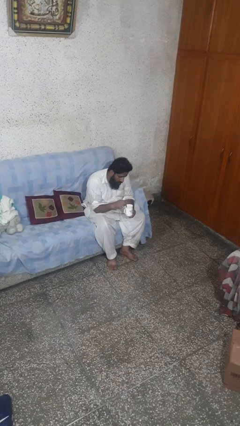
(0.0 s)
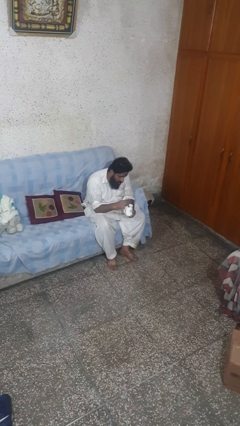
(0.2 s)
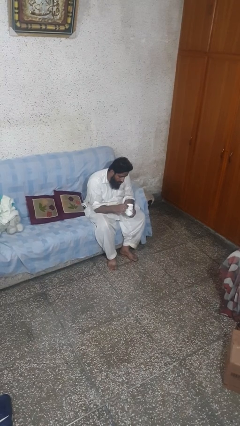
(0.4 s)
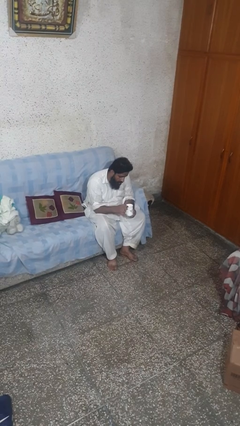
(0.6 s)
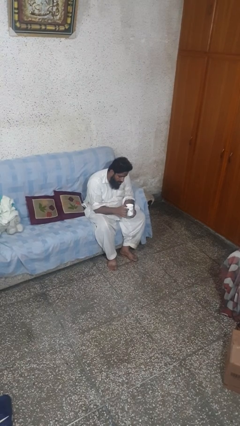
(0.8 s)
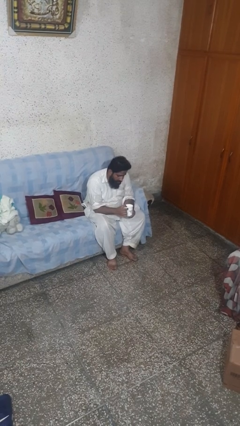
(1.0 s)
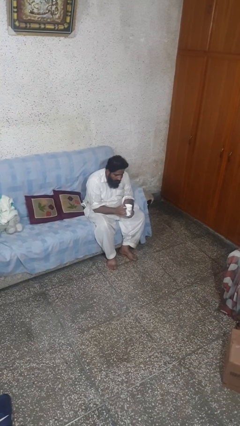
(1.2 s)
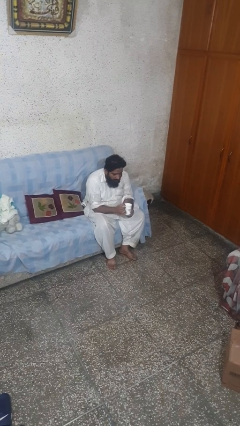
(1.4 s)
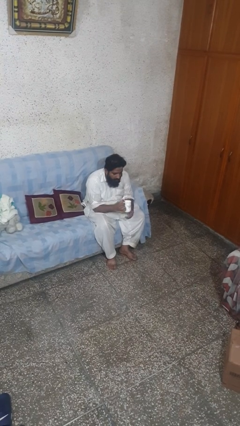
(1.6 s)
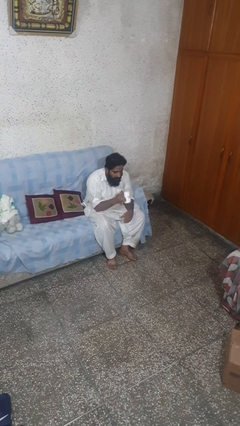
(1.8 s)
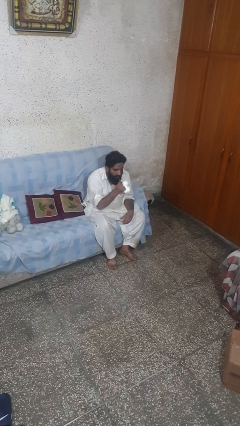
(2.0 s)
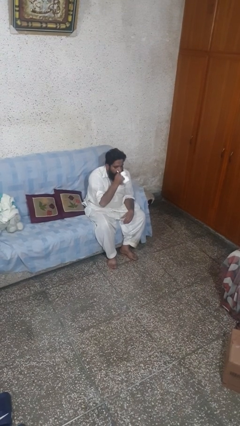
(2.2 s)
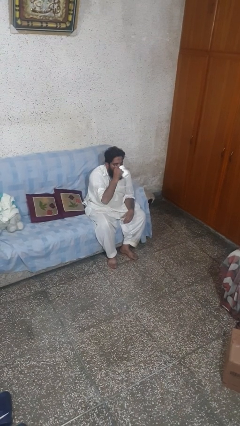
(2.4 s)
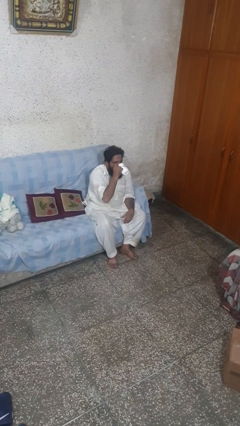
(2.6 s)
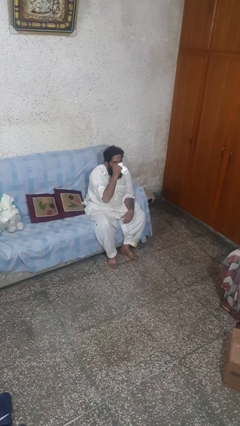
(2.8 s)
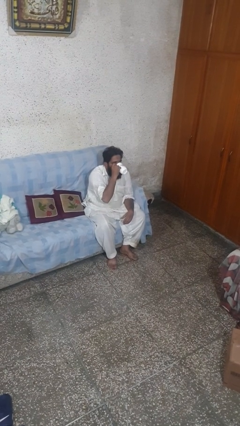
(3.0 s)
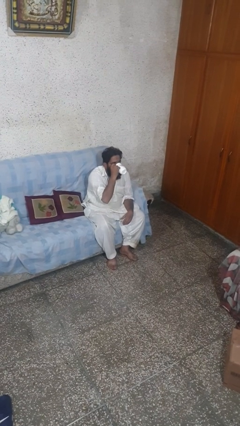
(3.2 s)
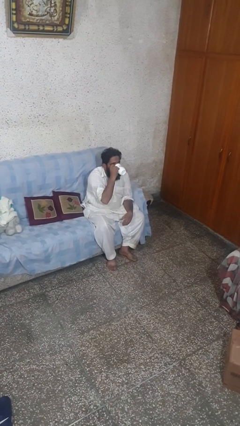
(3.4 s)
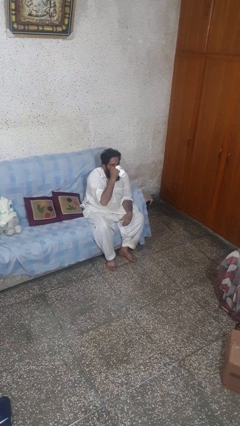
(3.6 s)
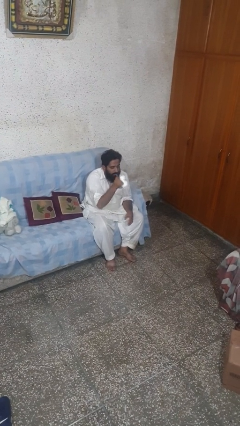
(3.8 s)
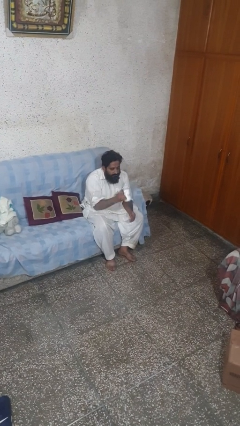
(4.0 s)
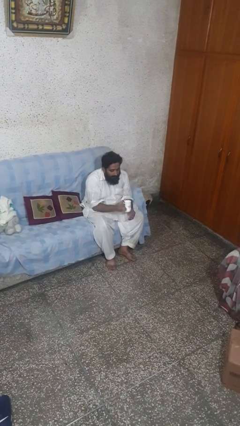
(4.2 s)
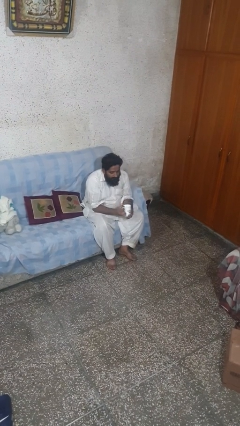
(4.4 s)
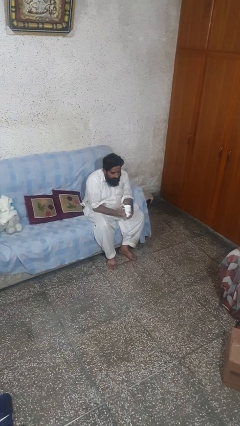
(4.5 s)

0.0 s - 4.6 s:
person drinks from mug

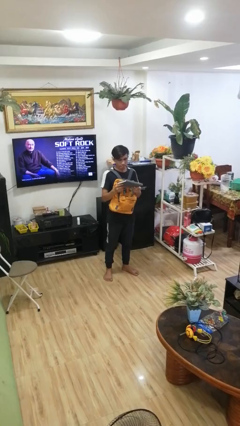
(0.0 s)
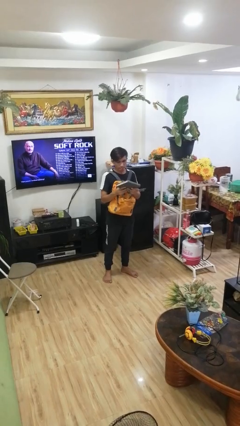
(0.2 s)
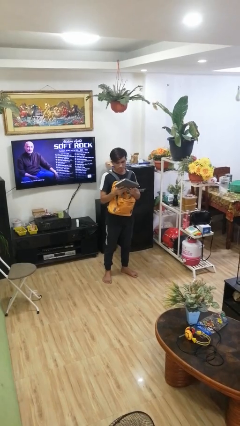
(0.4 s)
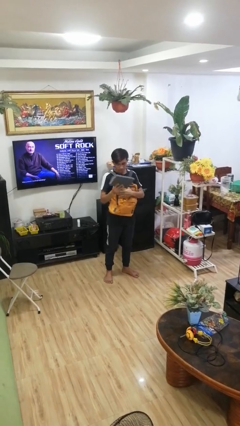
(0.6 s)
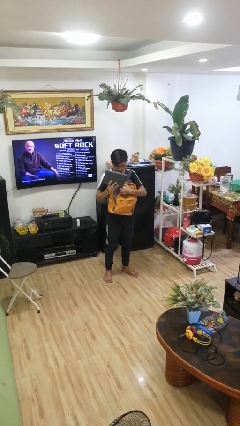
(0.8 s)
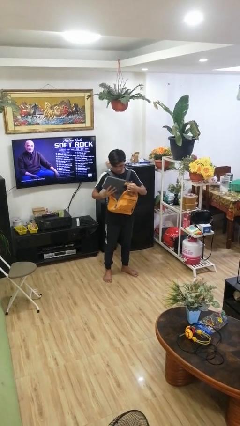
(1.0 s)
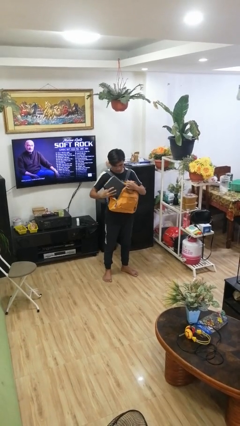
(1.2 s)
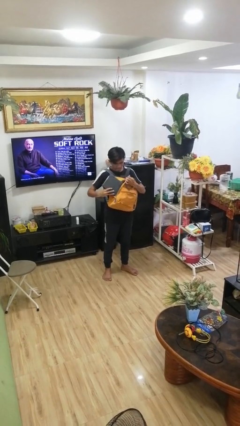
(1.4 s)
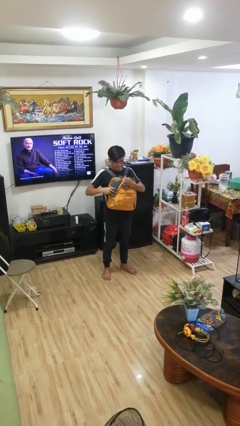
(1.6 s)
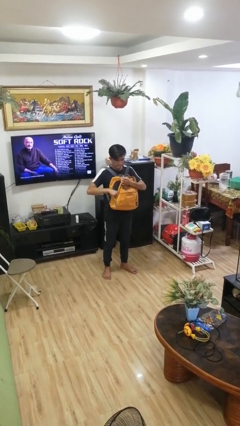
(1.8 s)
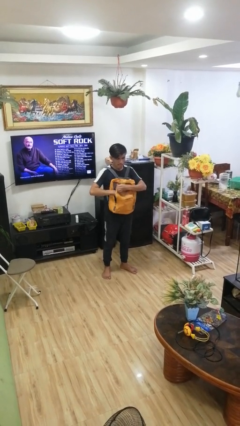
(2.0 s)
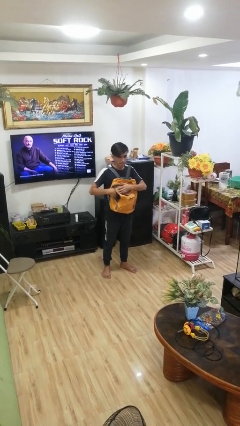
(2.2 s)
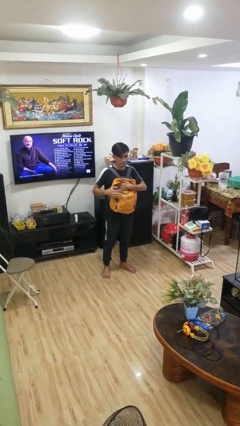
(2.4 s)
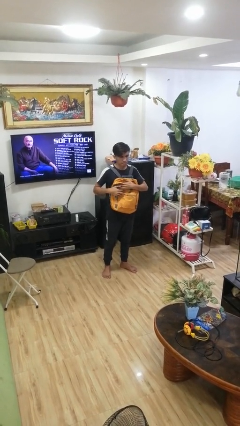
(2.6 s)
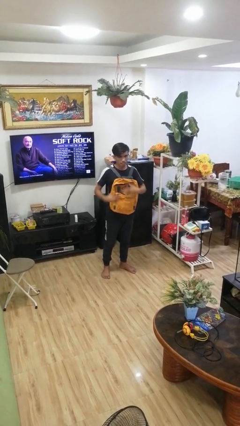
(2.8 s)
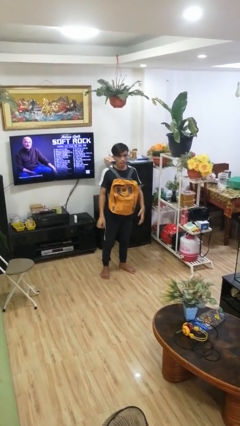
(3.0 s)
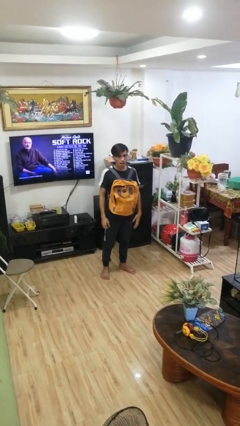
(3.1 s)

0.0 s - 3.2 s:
person puts object into backpack

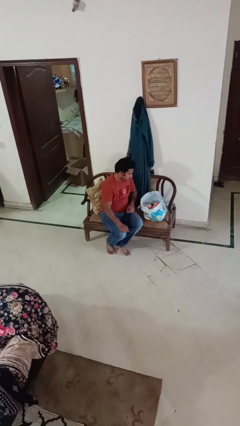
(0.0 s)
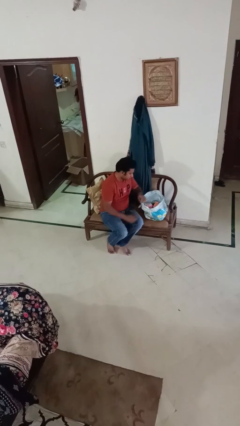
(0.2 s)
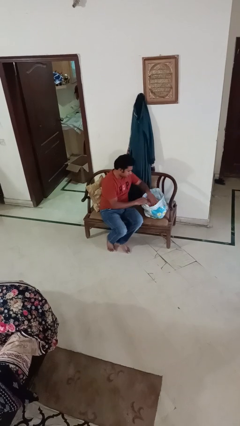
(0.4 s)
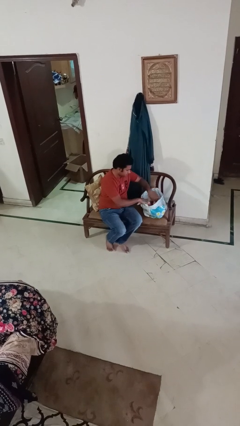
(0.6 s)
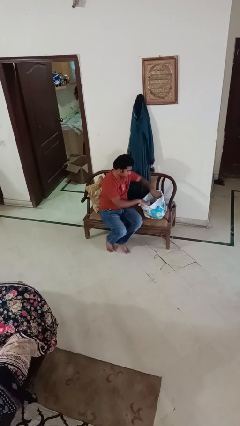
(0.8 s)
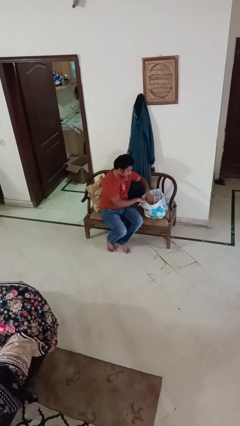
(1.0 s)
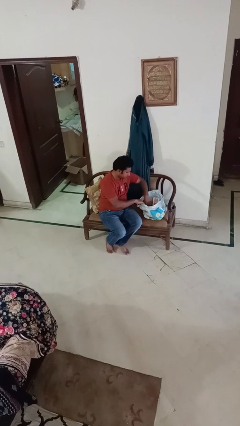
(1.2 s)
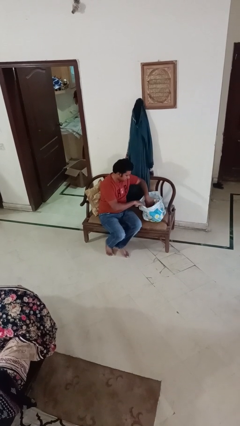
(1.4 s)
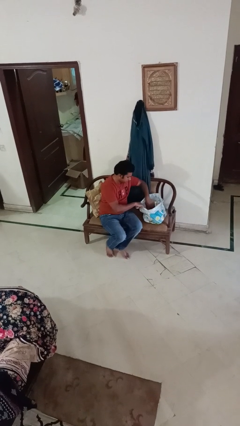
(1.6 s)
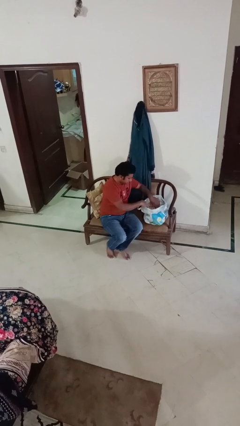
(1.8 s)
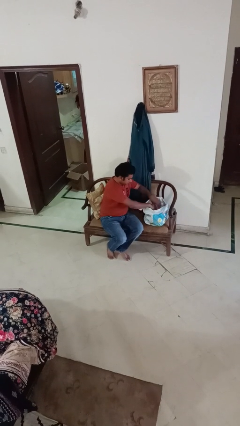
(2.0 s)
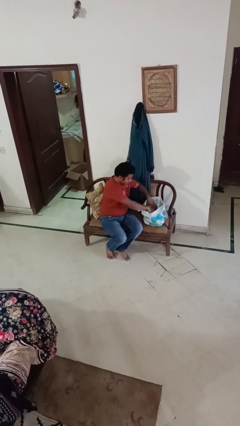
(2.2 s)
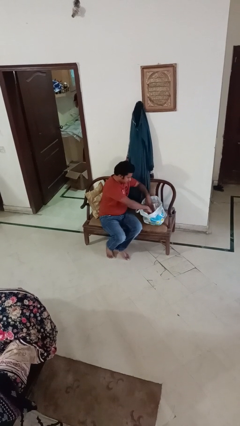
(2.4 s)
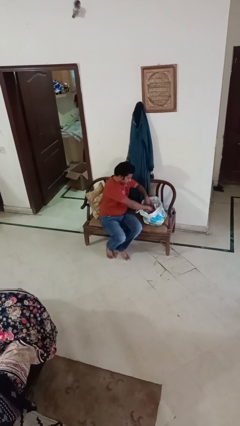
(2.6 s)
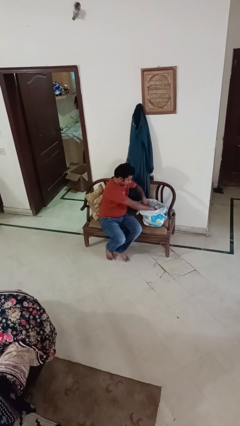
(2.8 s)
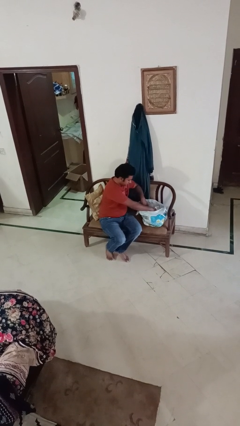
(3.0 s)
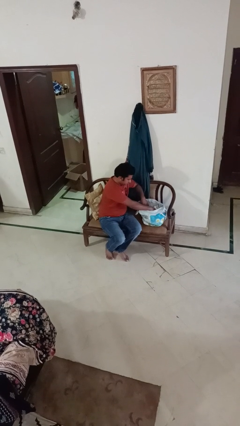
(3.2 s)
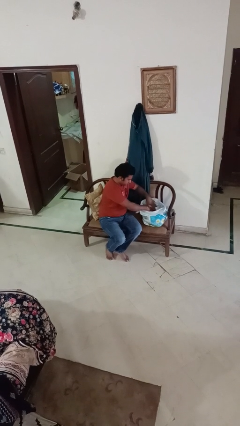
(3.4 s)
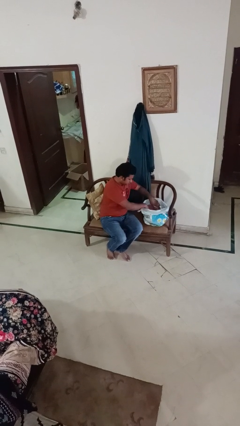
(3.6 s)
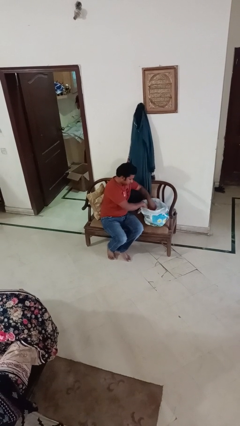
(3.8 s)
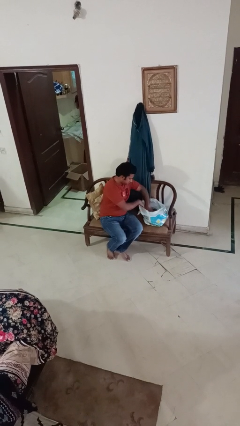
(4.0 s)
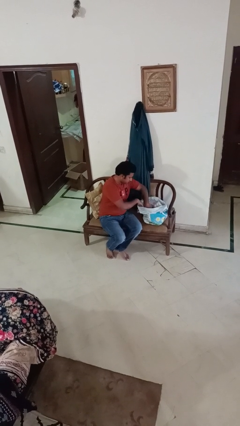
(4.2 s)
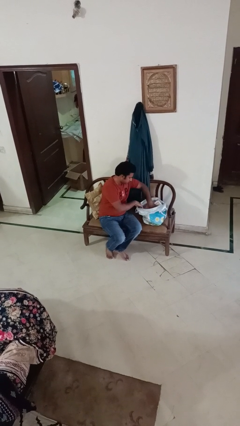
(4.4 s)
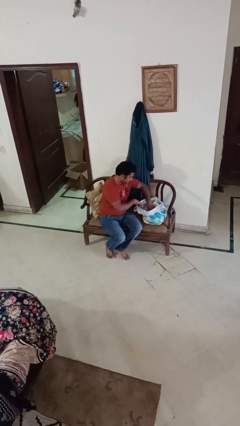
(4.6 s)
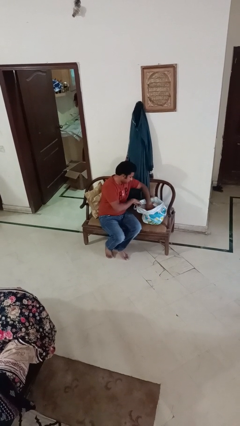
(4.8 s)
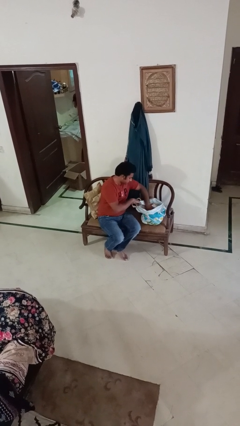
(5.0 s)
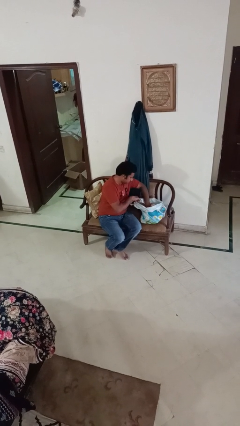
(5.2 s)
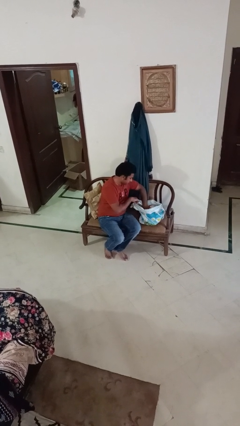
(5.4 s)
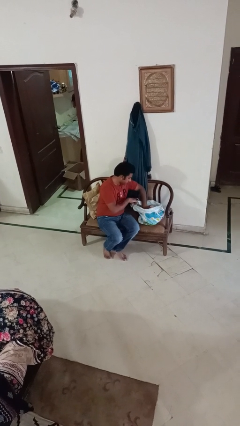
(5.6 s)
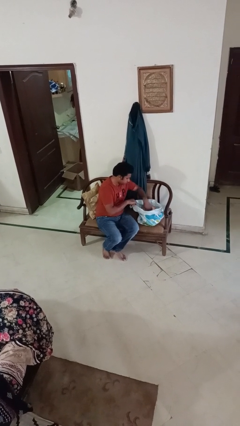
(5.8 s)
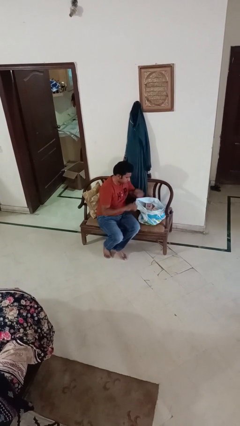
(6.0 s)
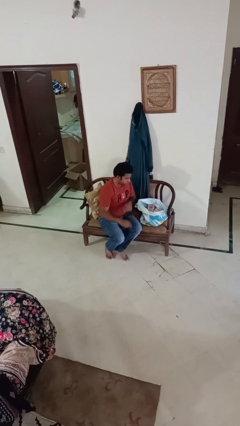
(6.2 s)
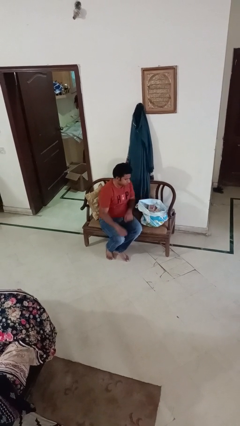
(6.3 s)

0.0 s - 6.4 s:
person searches in bag

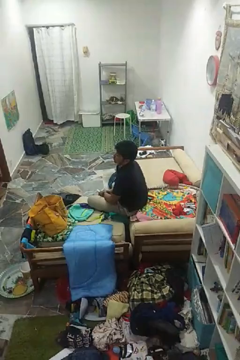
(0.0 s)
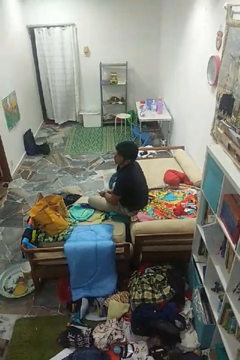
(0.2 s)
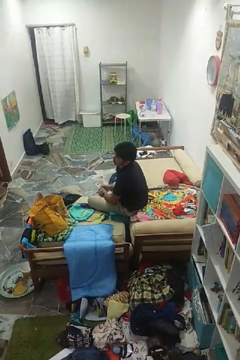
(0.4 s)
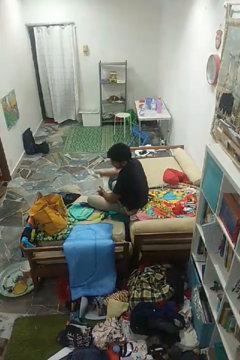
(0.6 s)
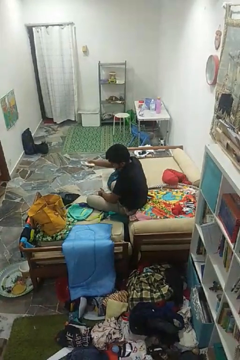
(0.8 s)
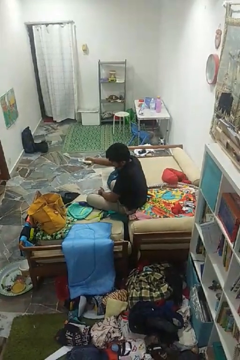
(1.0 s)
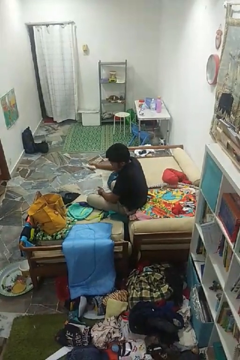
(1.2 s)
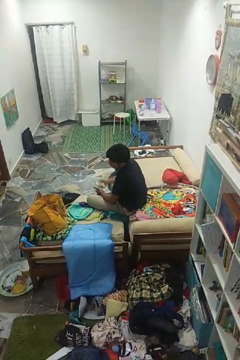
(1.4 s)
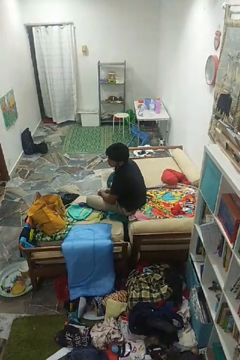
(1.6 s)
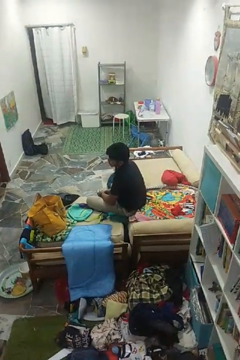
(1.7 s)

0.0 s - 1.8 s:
person uses television remote

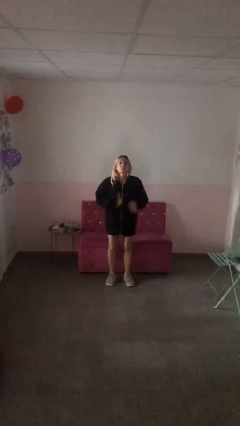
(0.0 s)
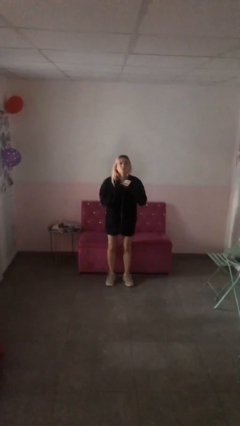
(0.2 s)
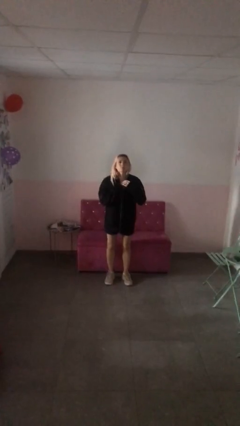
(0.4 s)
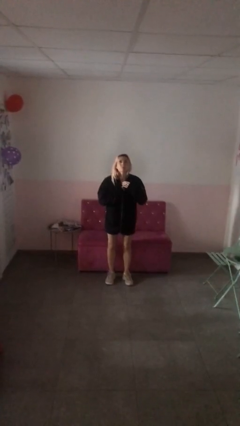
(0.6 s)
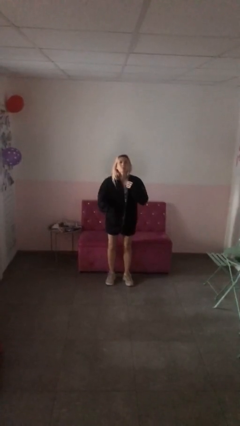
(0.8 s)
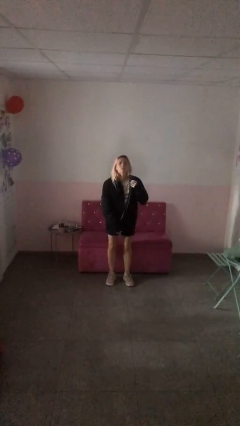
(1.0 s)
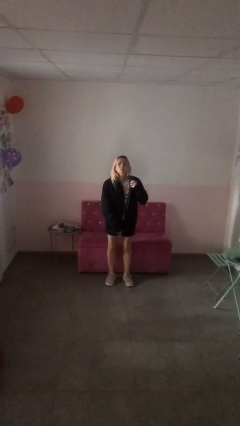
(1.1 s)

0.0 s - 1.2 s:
person unzips jacket

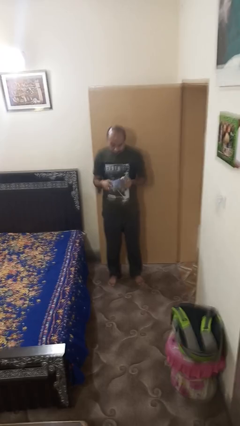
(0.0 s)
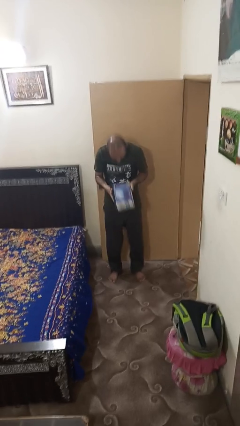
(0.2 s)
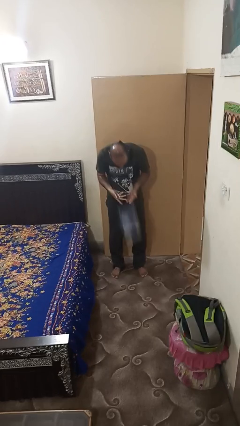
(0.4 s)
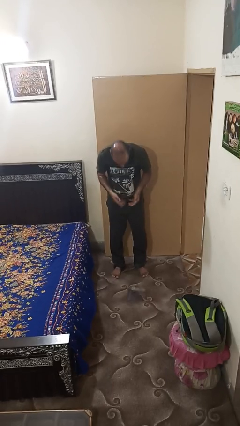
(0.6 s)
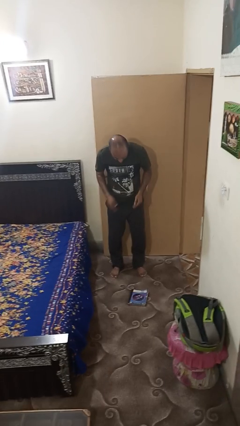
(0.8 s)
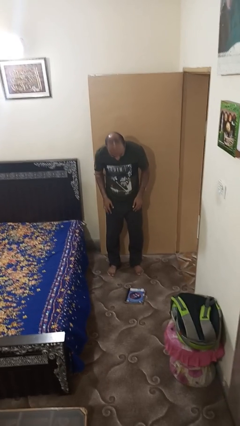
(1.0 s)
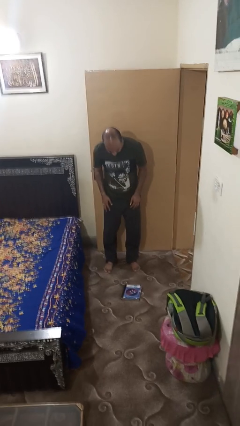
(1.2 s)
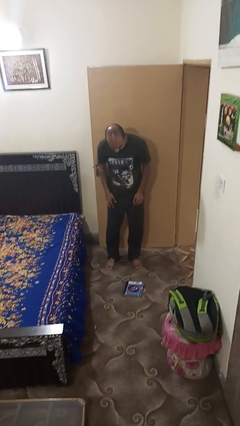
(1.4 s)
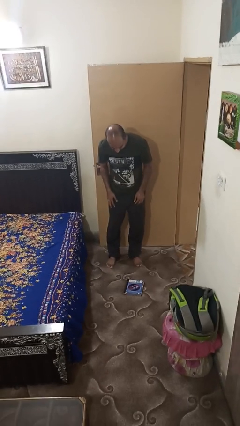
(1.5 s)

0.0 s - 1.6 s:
person drops object
